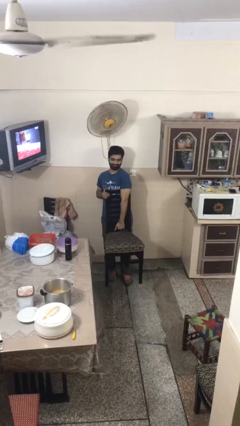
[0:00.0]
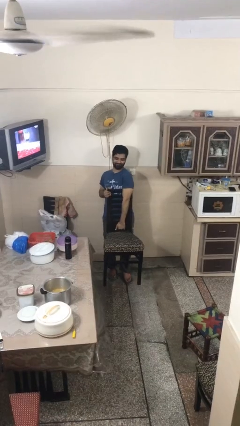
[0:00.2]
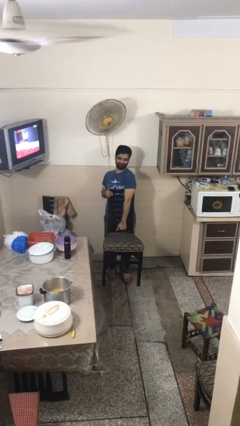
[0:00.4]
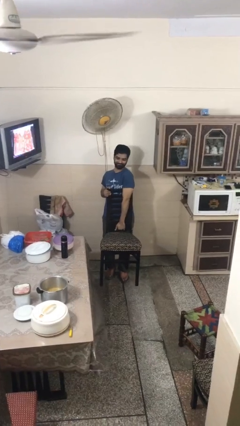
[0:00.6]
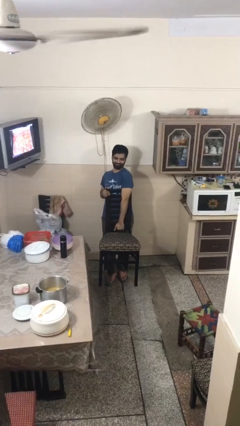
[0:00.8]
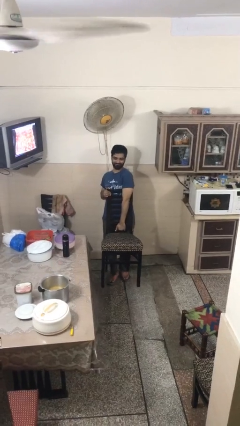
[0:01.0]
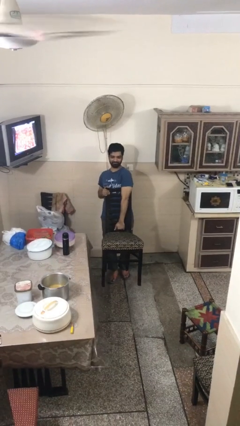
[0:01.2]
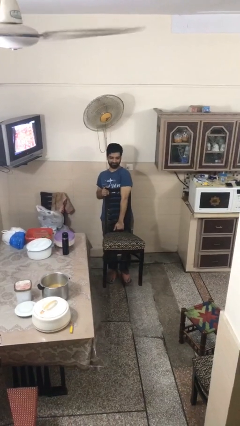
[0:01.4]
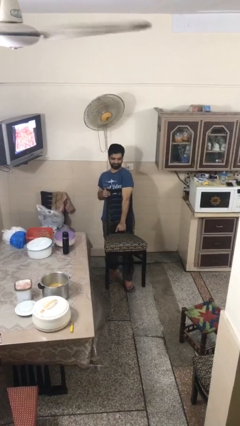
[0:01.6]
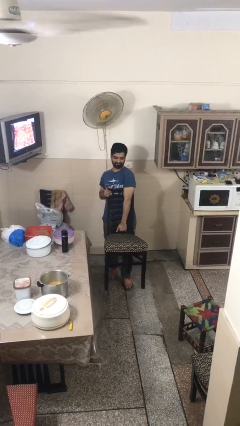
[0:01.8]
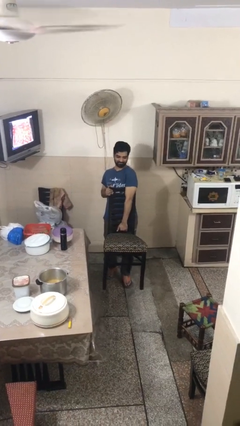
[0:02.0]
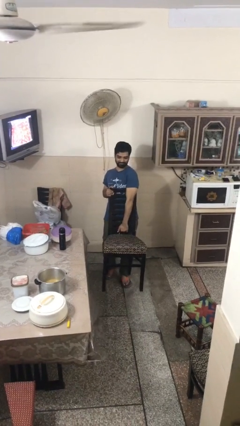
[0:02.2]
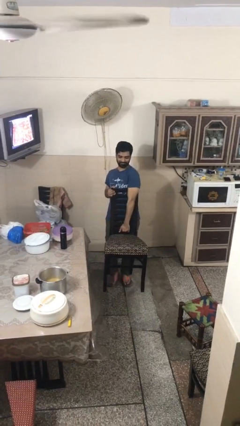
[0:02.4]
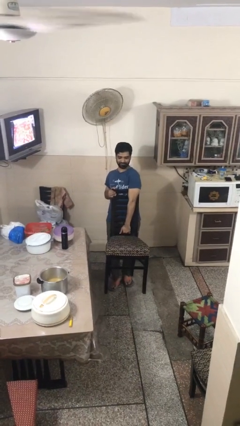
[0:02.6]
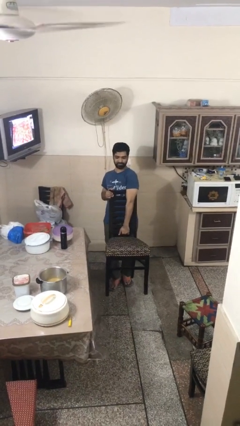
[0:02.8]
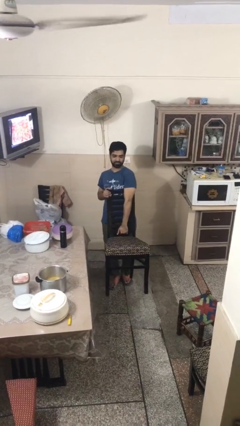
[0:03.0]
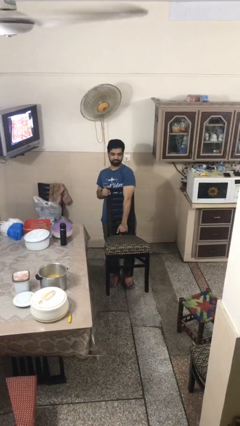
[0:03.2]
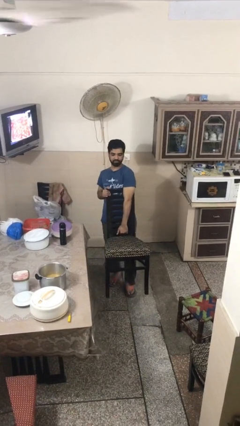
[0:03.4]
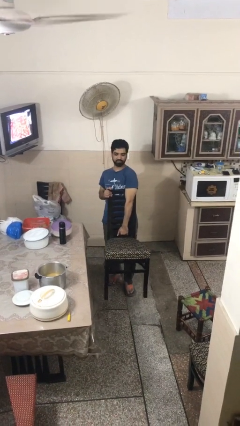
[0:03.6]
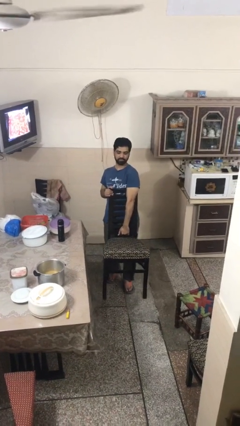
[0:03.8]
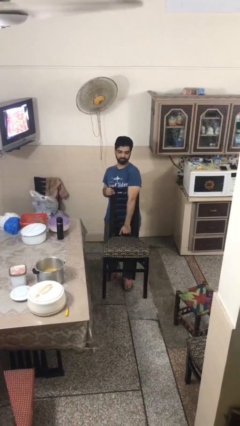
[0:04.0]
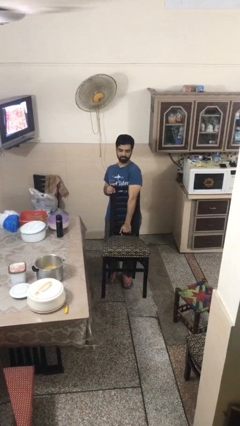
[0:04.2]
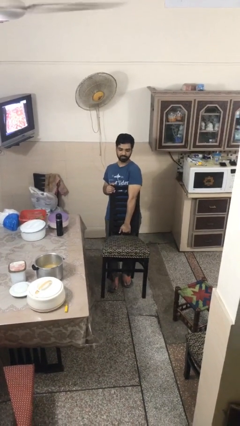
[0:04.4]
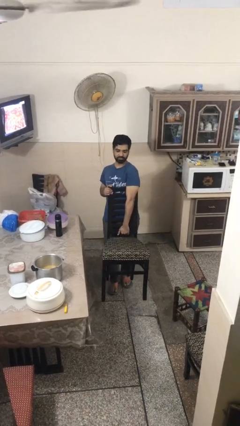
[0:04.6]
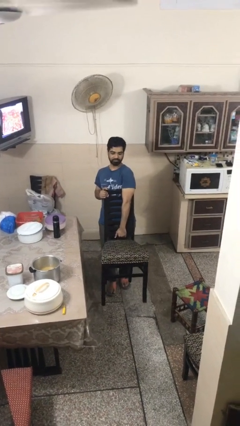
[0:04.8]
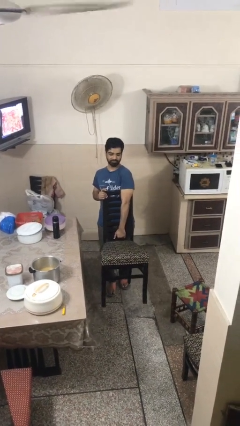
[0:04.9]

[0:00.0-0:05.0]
person carries heavy object

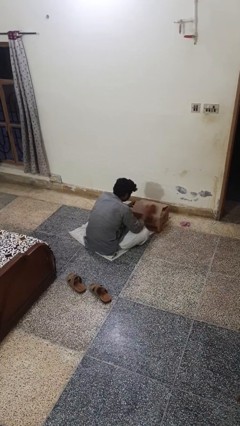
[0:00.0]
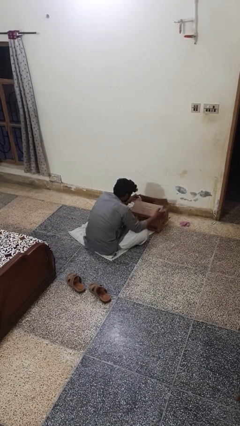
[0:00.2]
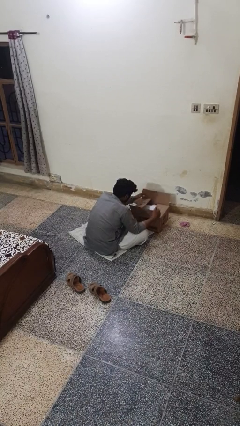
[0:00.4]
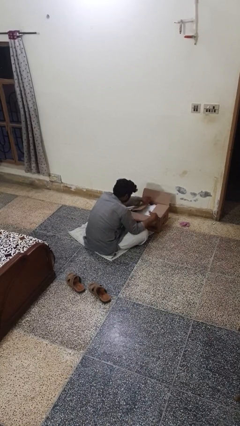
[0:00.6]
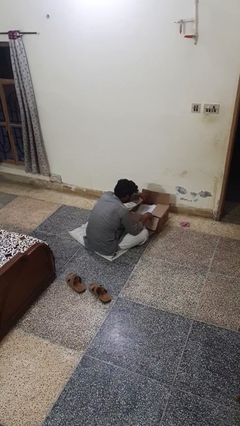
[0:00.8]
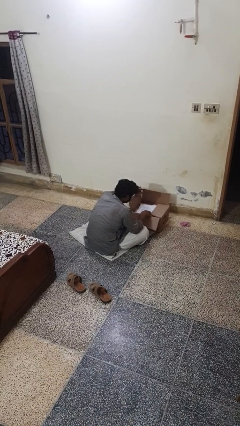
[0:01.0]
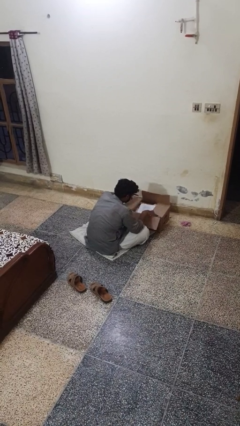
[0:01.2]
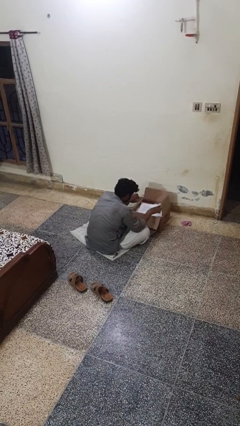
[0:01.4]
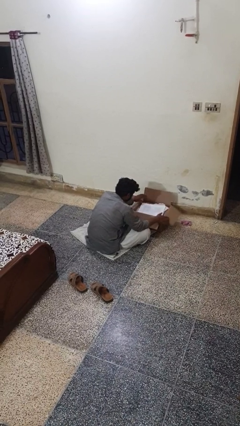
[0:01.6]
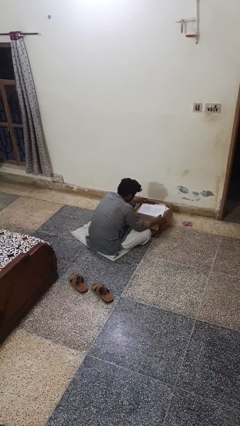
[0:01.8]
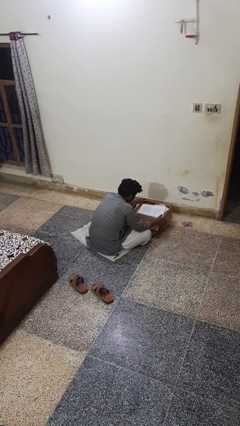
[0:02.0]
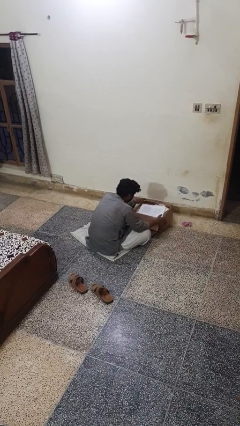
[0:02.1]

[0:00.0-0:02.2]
person opens box

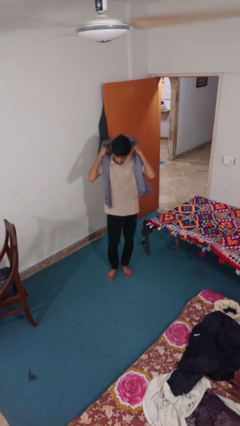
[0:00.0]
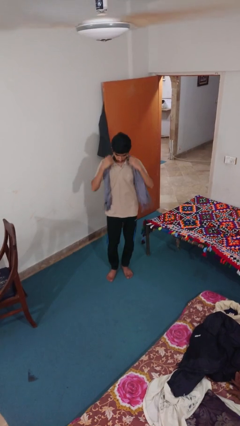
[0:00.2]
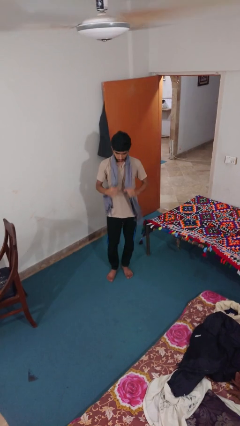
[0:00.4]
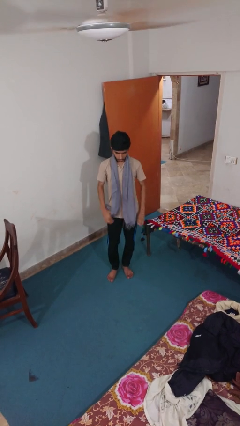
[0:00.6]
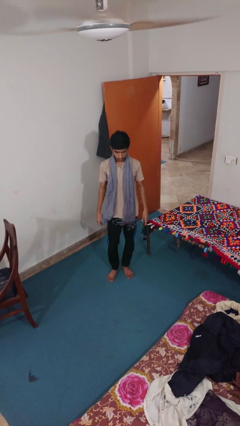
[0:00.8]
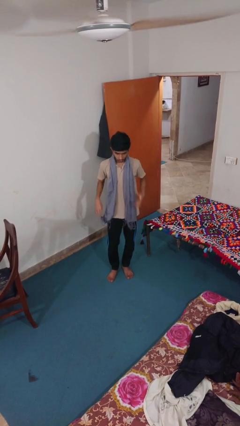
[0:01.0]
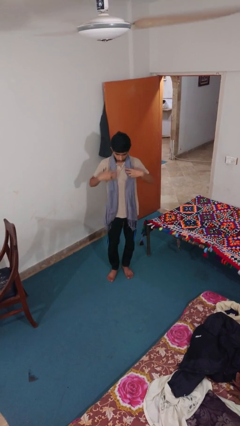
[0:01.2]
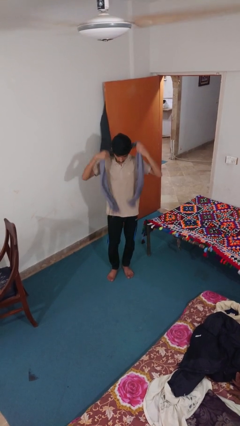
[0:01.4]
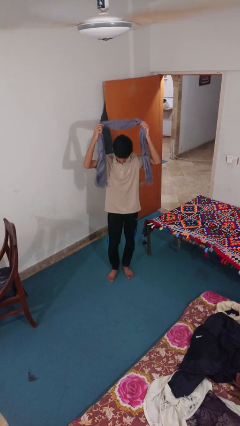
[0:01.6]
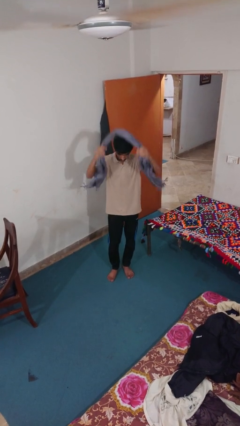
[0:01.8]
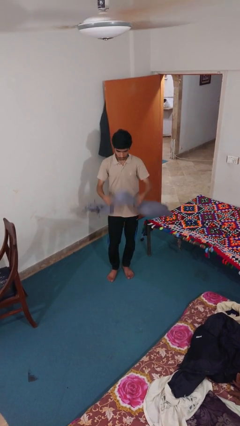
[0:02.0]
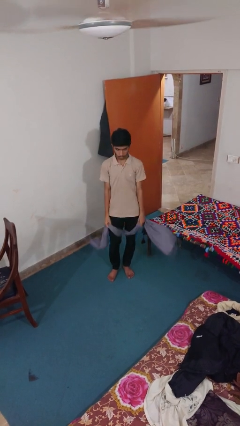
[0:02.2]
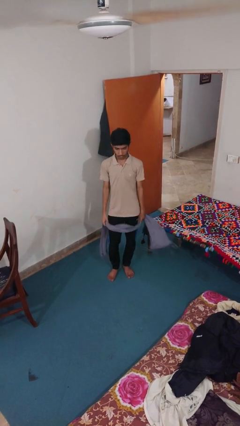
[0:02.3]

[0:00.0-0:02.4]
person takes off scarf

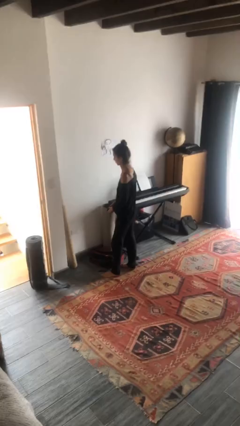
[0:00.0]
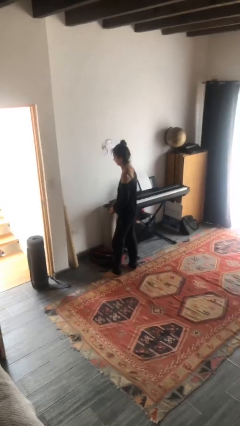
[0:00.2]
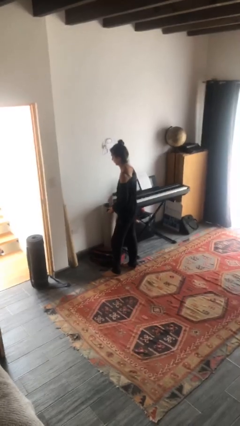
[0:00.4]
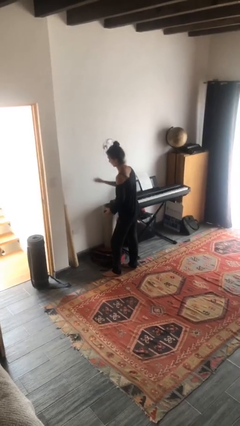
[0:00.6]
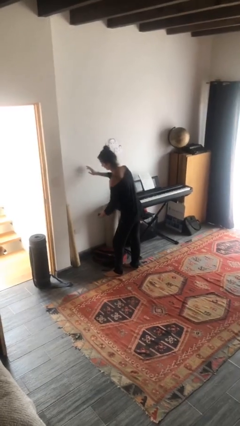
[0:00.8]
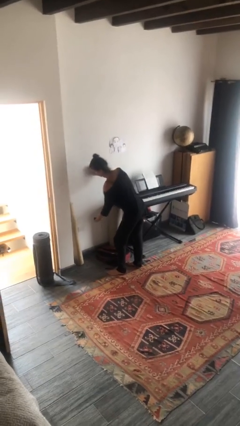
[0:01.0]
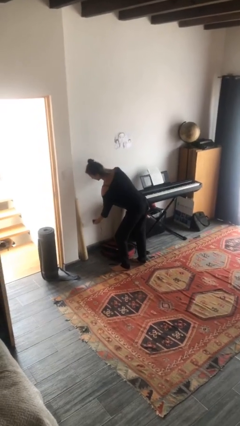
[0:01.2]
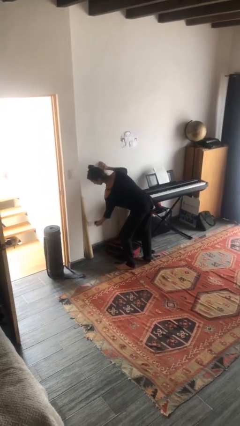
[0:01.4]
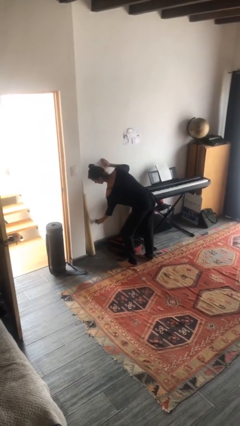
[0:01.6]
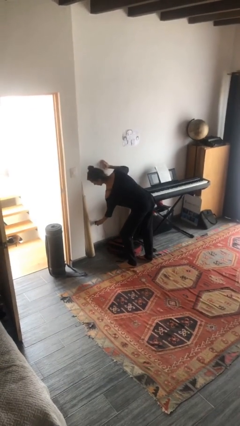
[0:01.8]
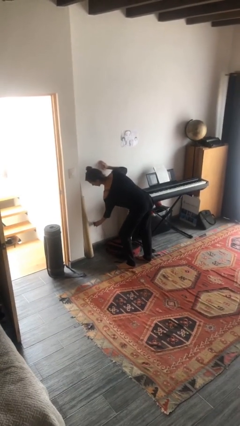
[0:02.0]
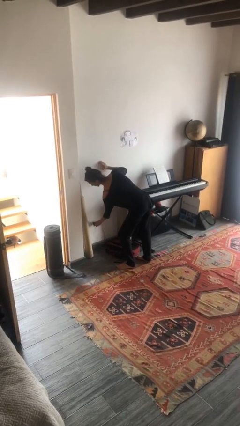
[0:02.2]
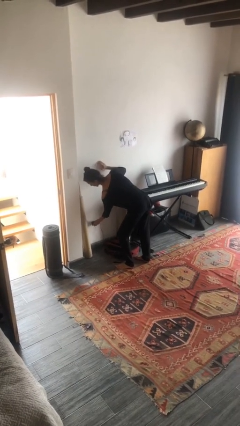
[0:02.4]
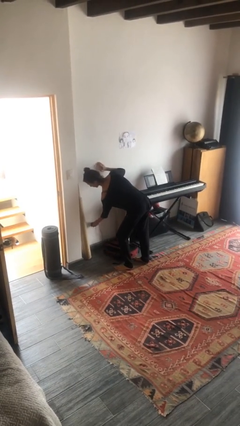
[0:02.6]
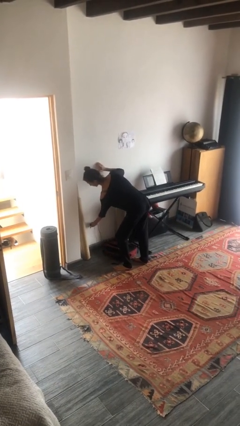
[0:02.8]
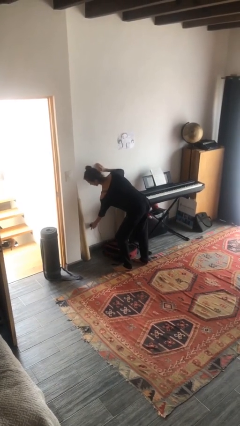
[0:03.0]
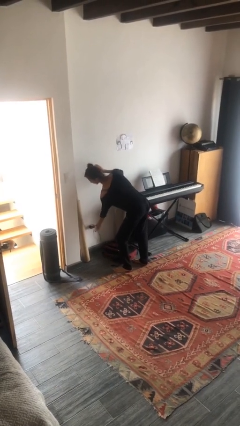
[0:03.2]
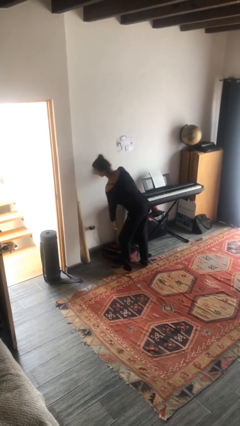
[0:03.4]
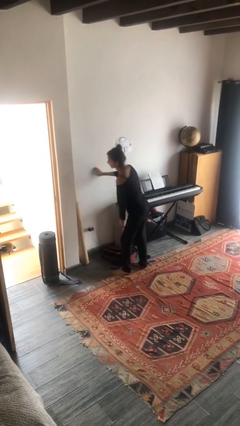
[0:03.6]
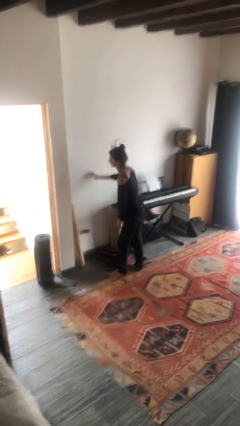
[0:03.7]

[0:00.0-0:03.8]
person plugs into electrical socket

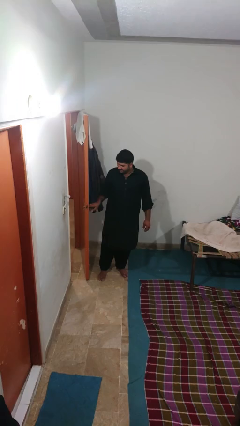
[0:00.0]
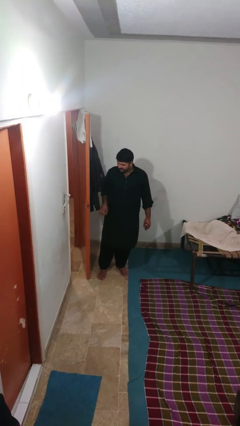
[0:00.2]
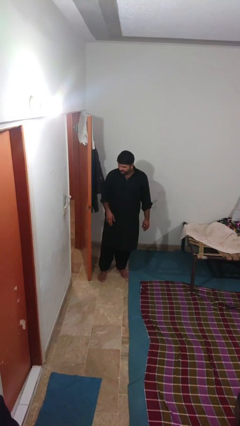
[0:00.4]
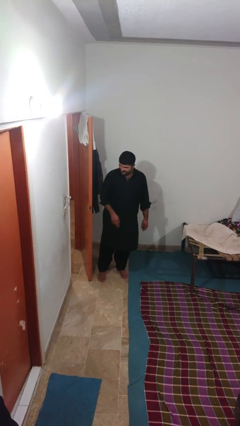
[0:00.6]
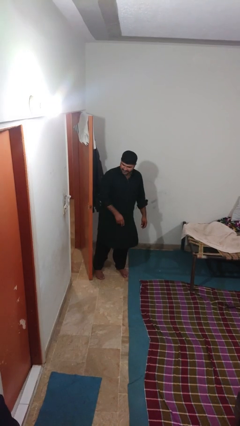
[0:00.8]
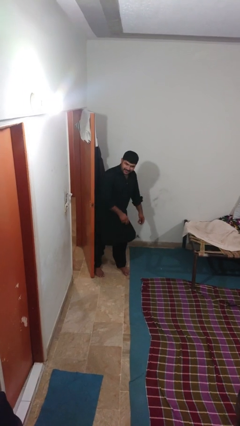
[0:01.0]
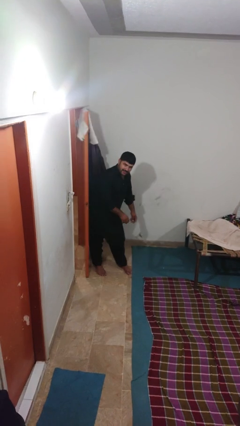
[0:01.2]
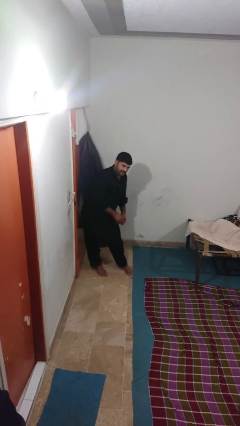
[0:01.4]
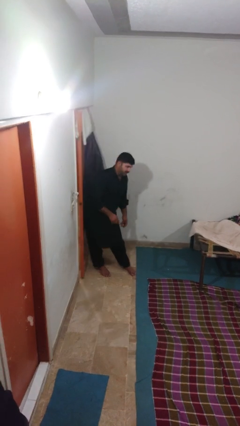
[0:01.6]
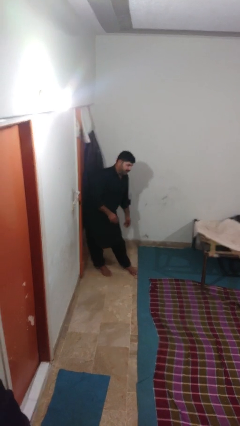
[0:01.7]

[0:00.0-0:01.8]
person closes door with hip

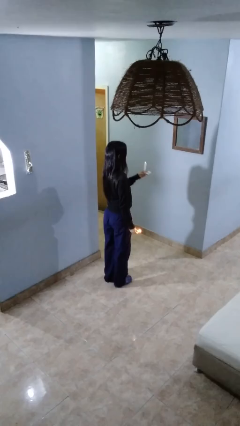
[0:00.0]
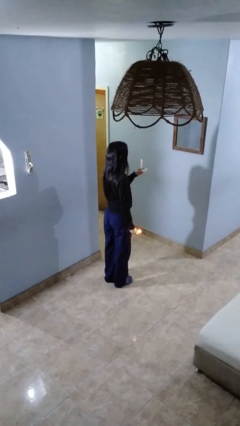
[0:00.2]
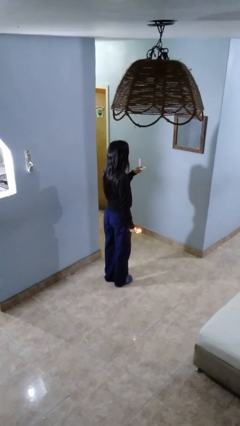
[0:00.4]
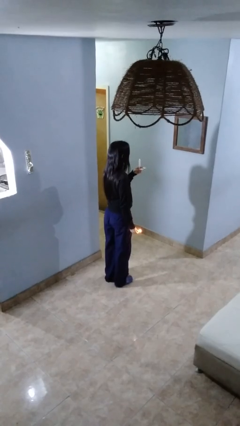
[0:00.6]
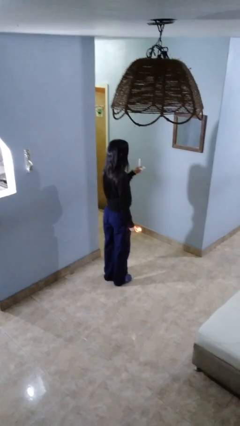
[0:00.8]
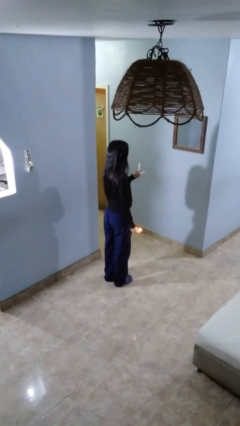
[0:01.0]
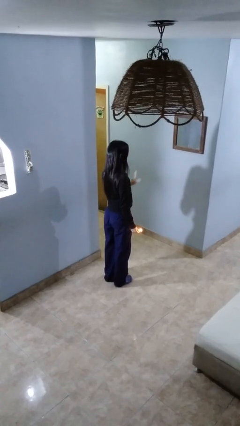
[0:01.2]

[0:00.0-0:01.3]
person extinguishes candle

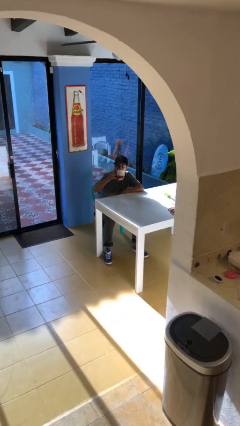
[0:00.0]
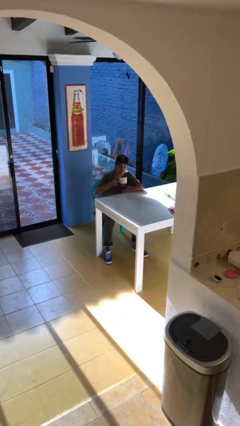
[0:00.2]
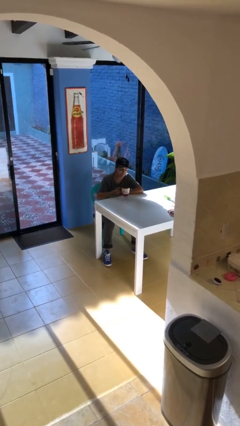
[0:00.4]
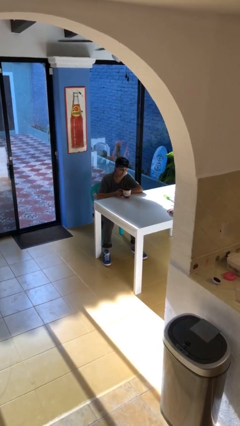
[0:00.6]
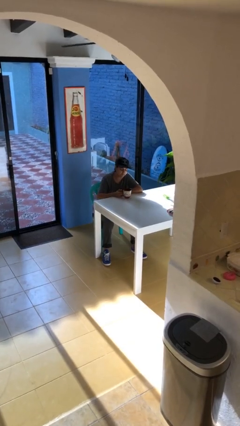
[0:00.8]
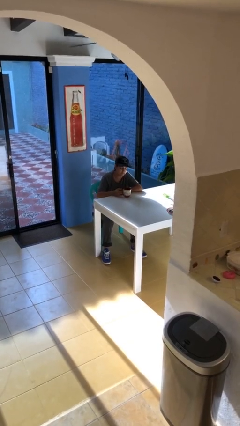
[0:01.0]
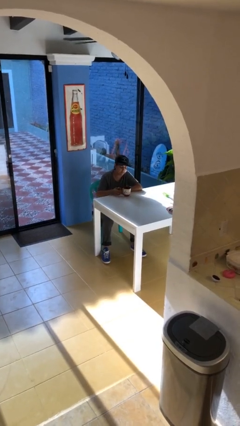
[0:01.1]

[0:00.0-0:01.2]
person puts down object on table
